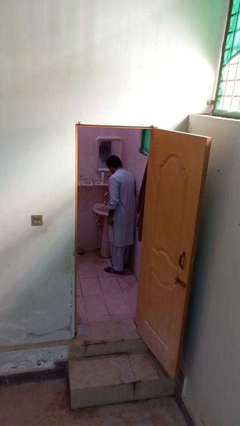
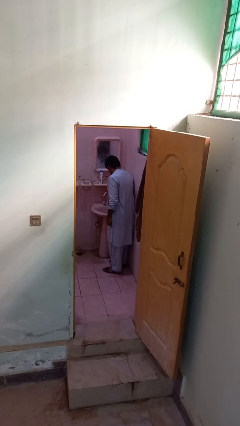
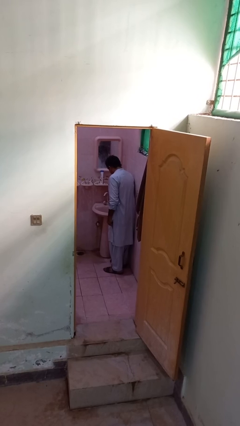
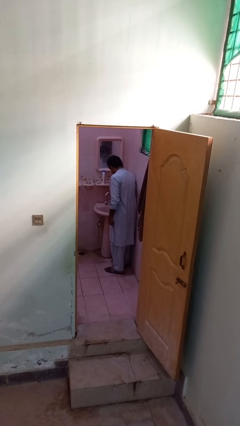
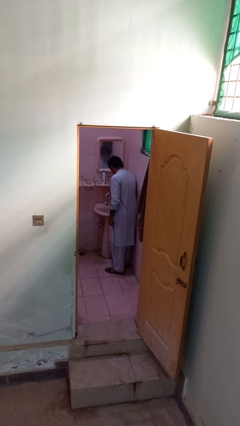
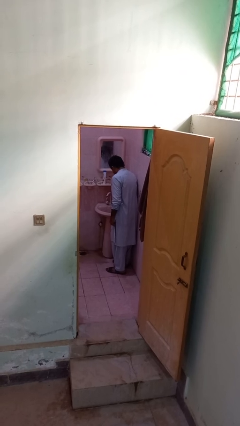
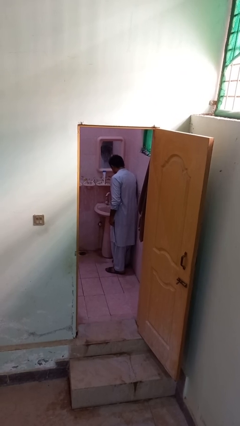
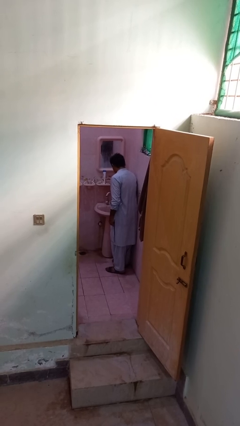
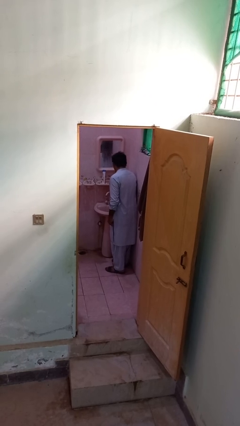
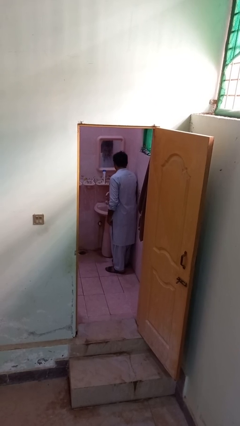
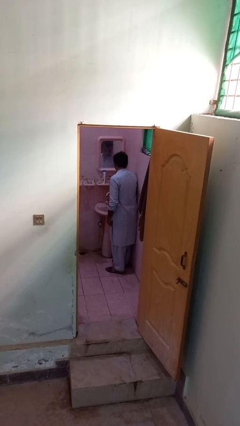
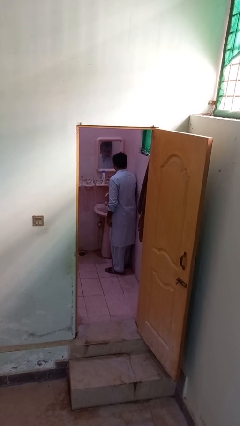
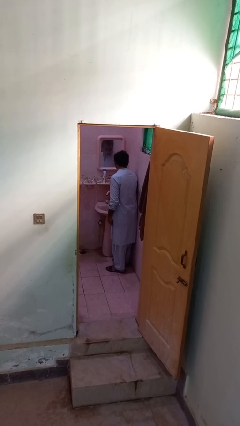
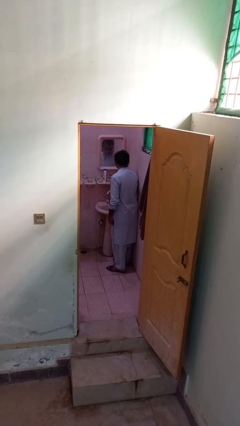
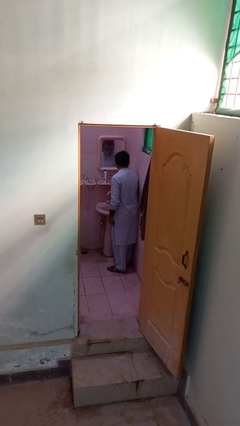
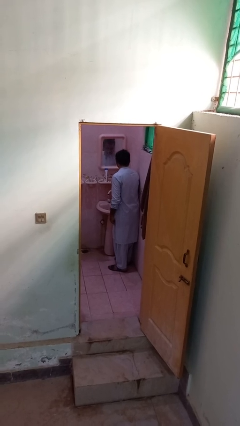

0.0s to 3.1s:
person turns on faucet

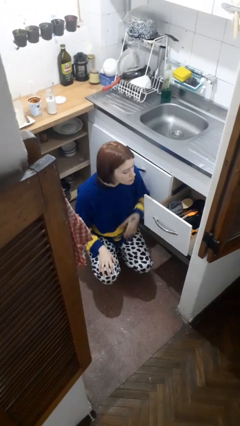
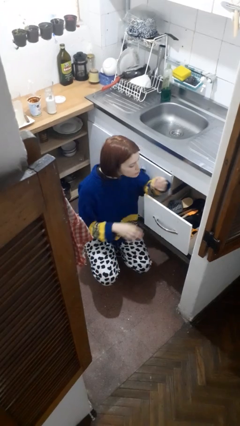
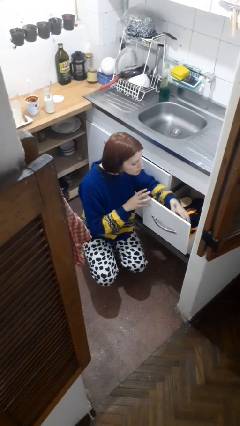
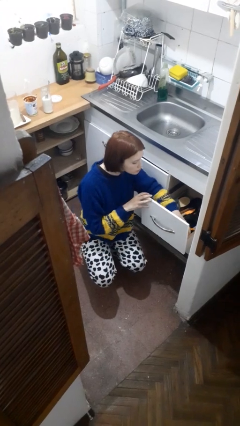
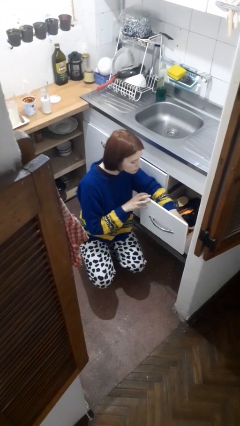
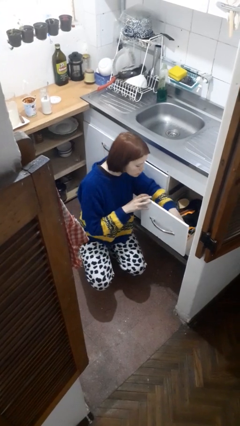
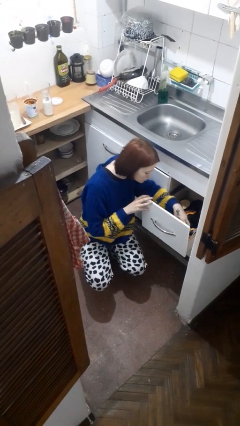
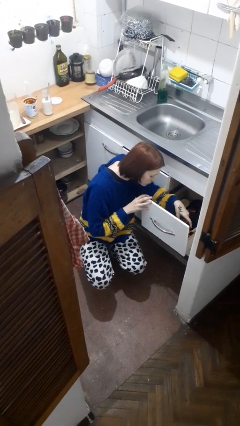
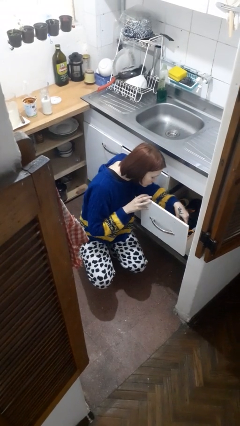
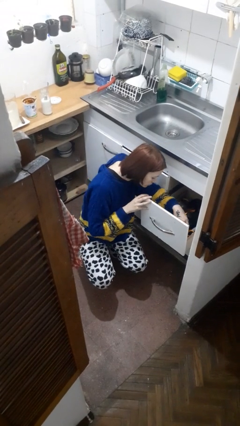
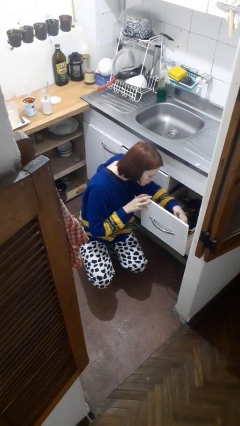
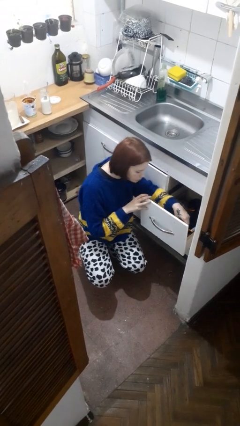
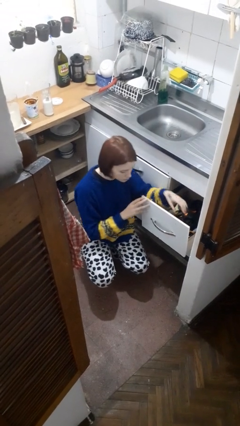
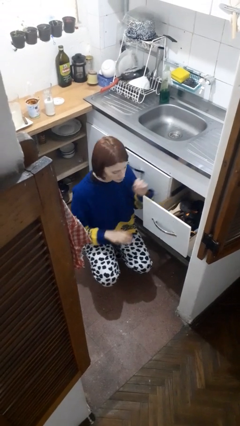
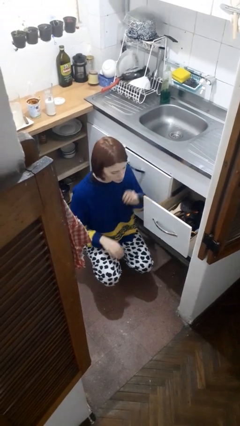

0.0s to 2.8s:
person searches in kitchen drawer

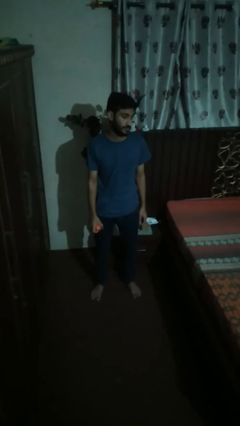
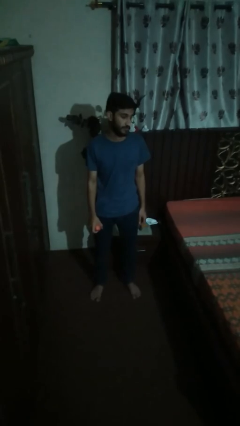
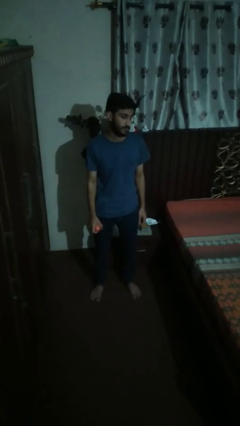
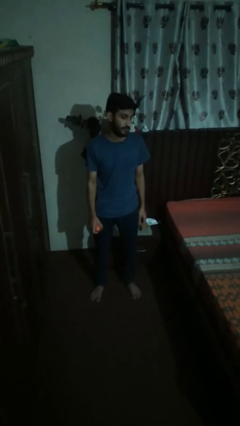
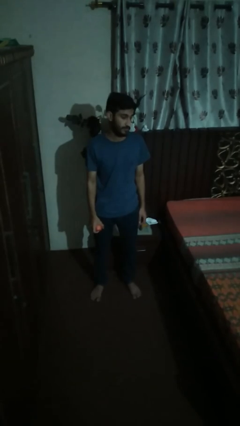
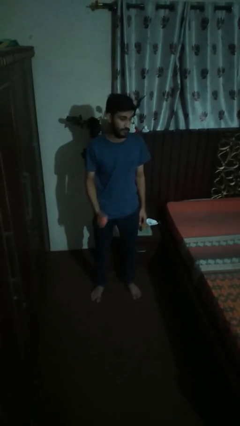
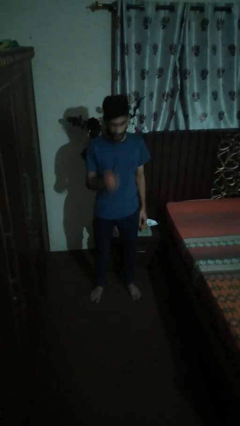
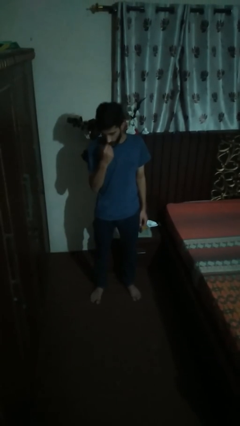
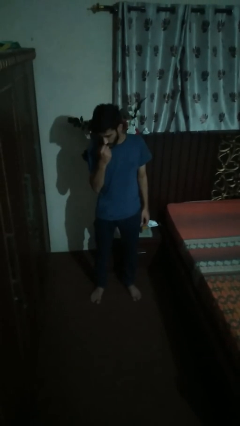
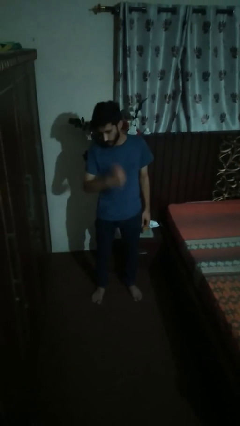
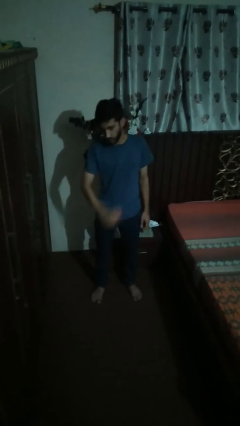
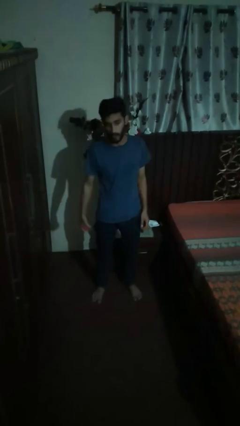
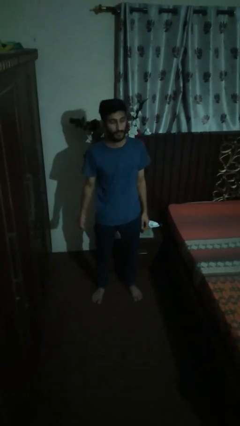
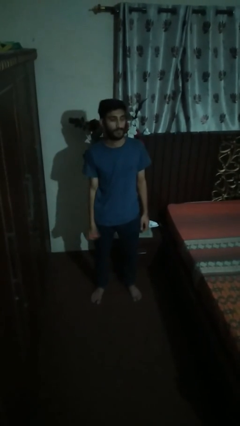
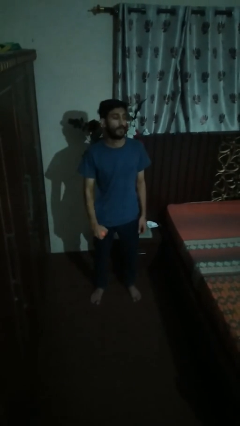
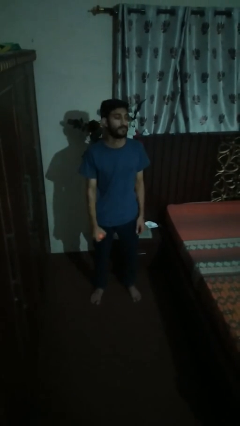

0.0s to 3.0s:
person eats apple

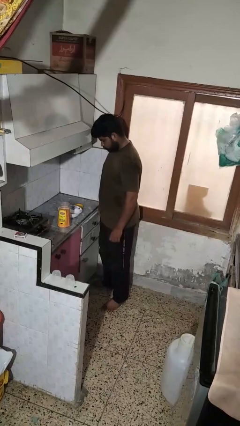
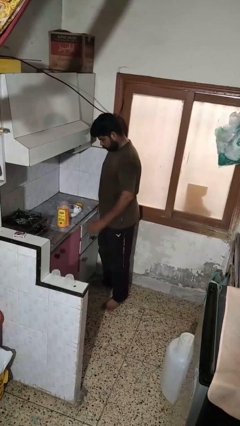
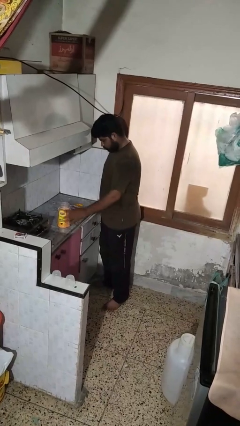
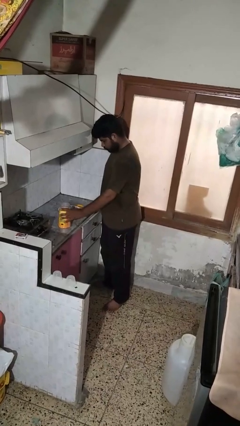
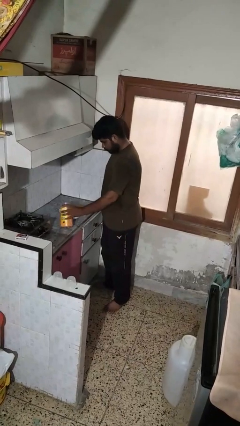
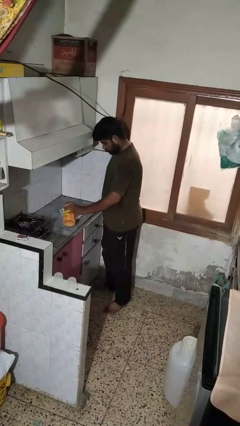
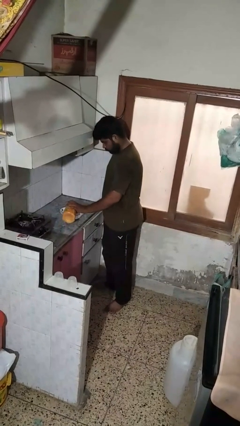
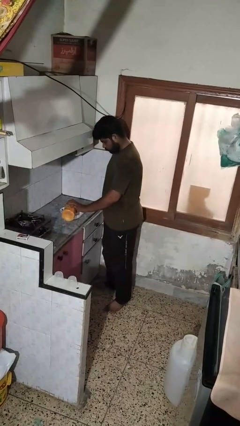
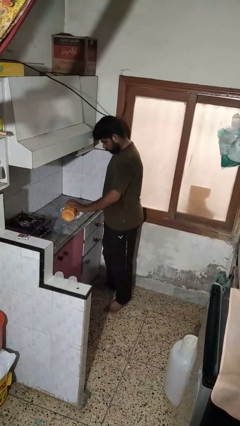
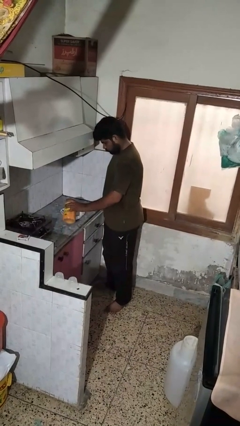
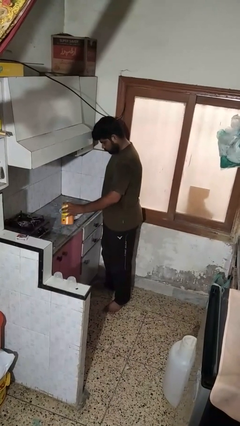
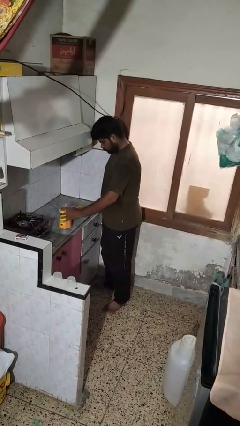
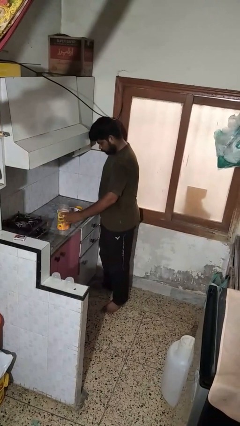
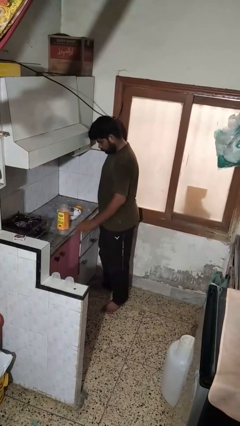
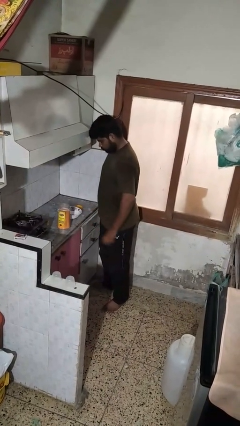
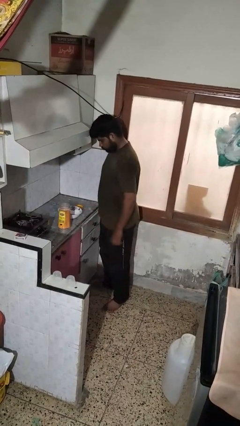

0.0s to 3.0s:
person pours into bowl

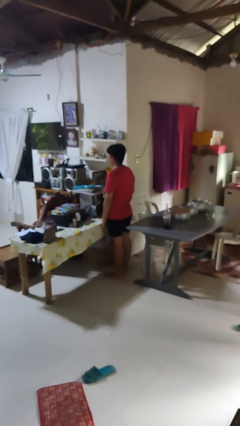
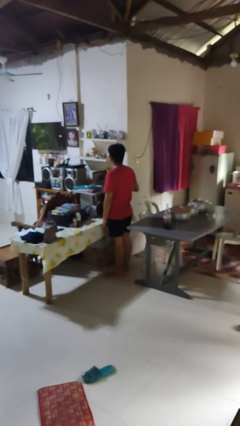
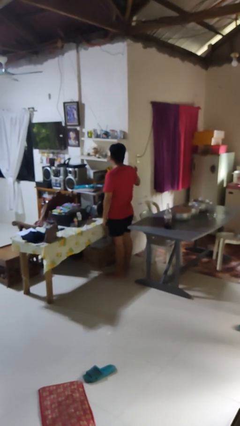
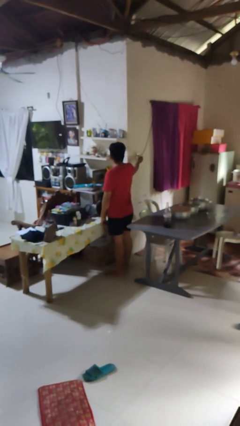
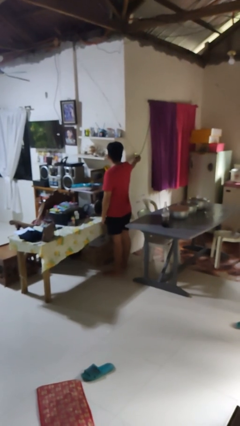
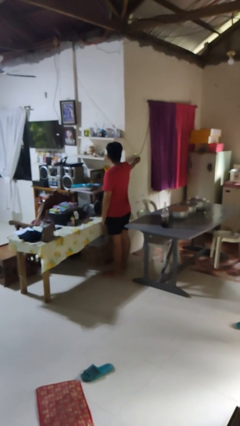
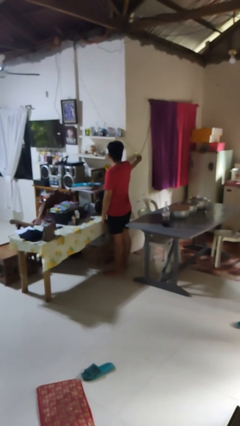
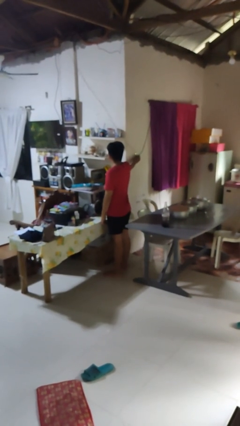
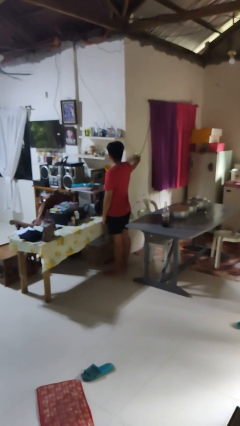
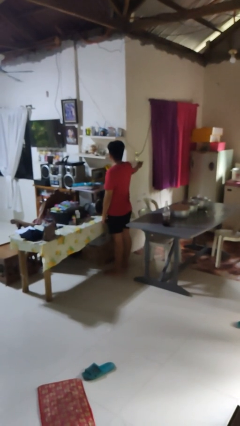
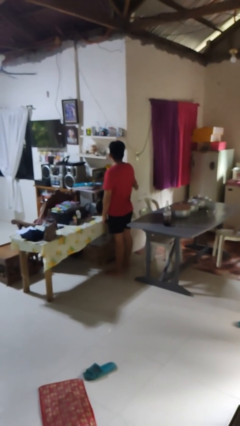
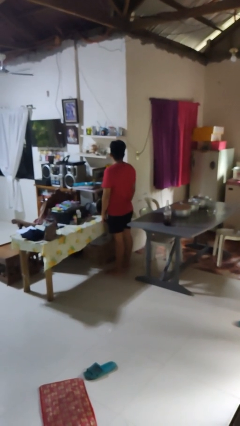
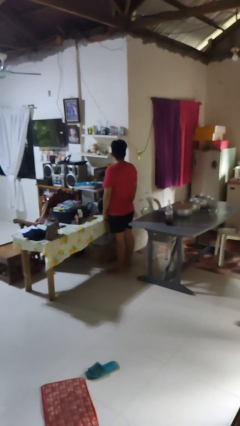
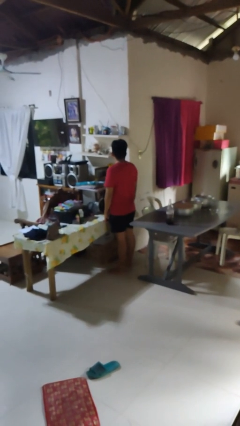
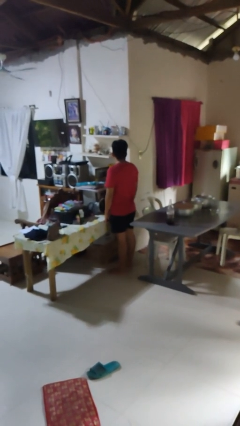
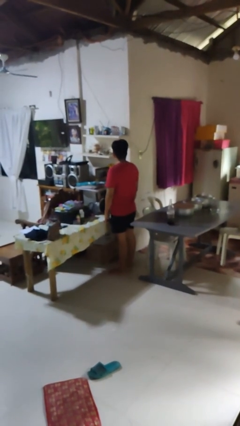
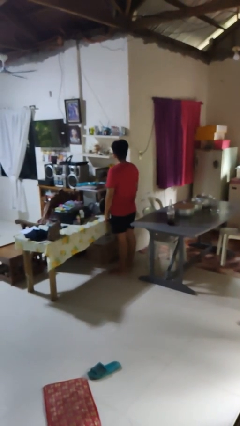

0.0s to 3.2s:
person turns on fan

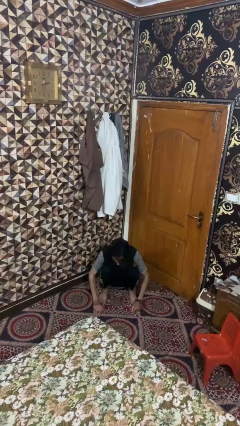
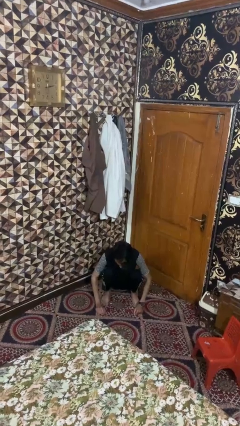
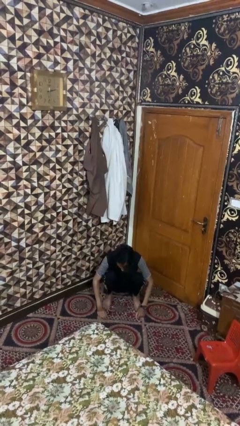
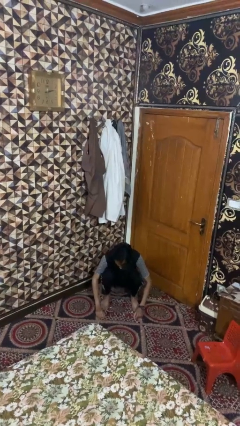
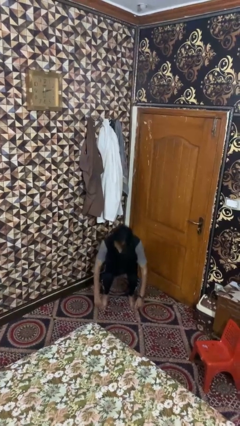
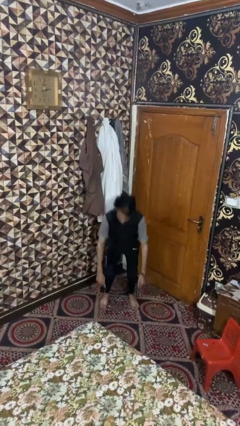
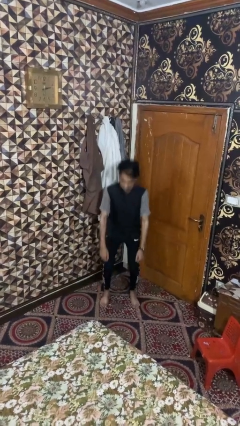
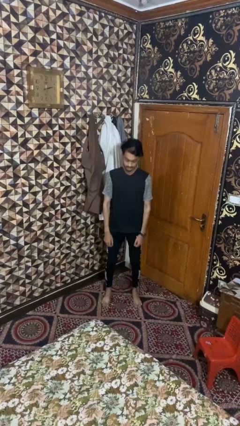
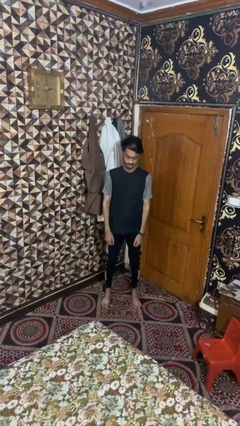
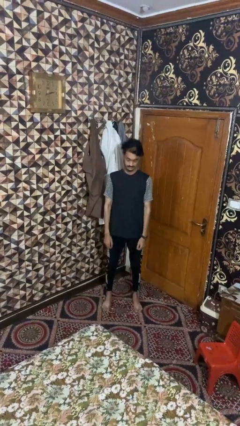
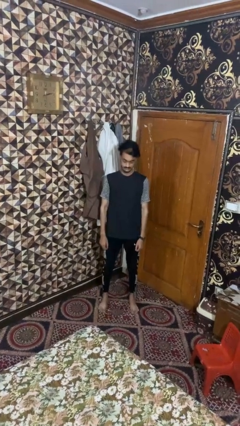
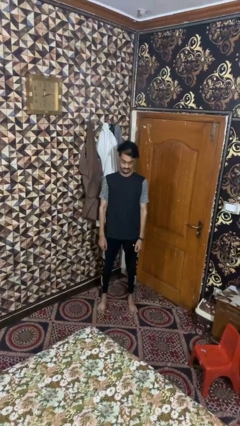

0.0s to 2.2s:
person stands up

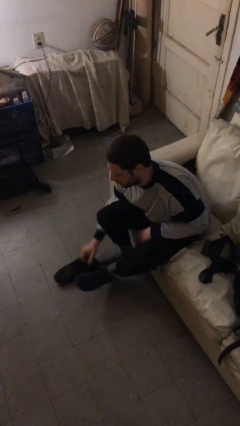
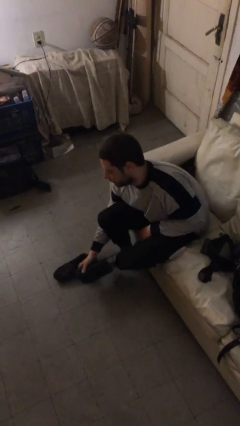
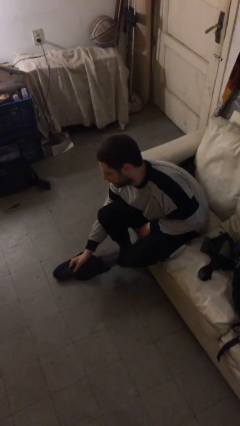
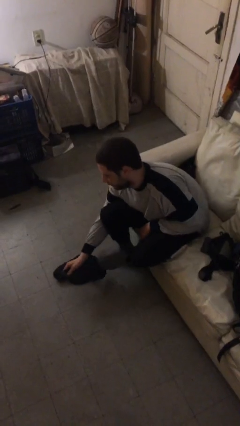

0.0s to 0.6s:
person takes off shoes
